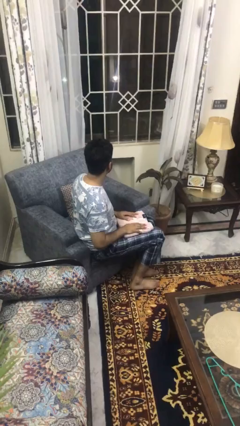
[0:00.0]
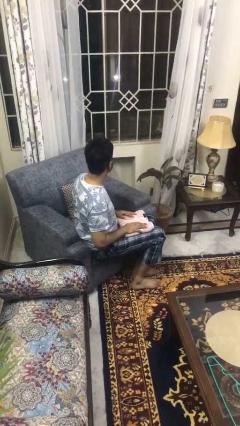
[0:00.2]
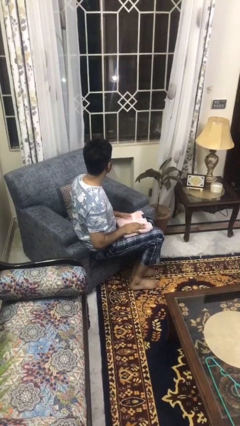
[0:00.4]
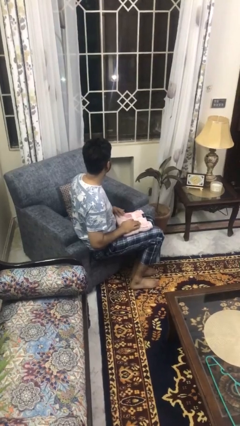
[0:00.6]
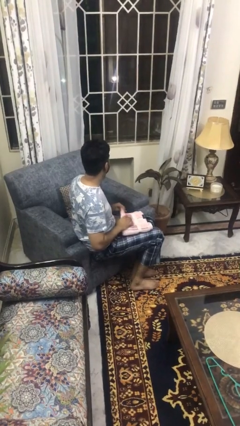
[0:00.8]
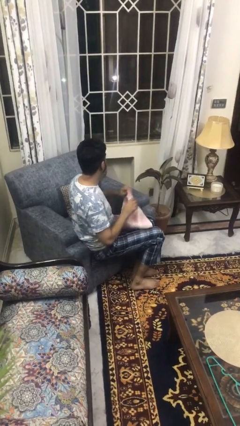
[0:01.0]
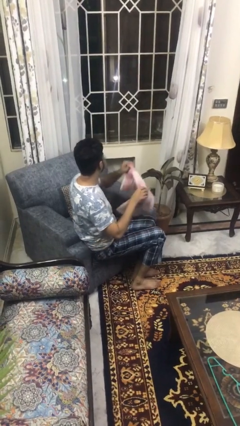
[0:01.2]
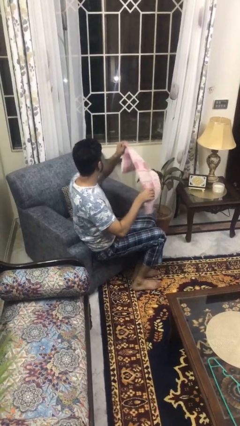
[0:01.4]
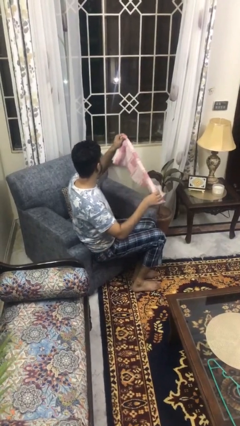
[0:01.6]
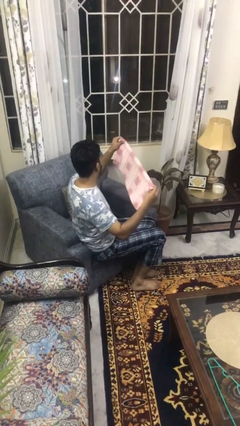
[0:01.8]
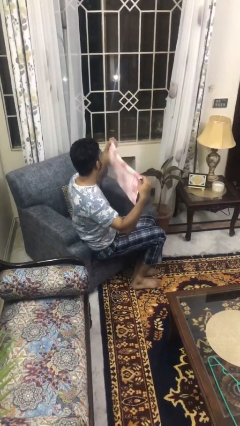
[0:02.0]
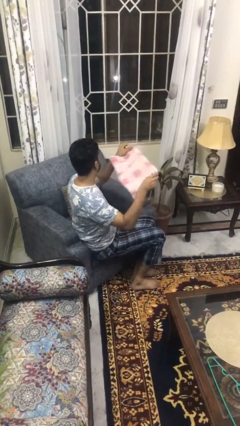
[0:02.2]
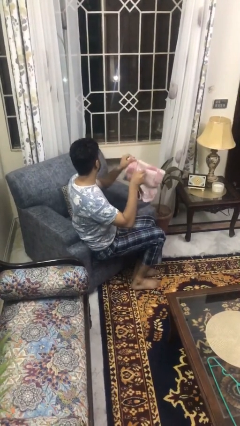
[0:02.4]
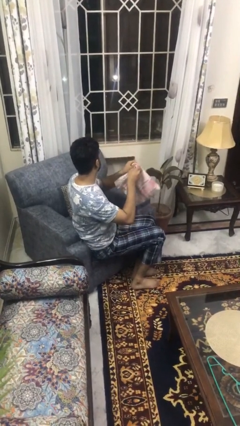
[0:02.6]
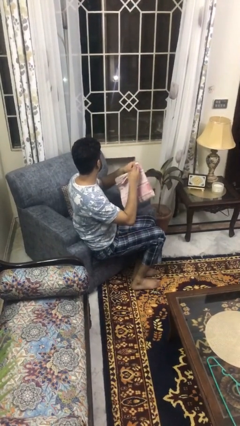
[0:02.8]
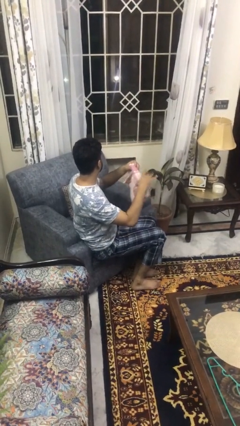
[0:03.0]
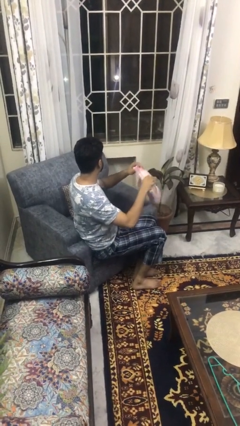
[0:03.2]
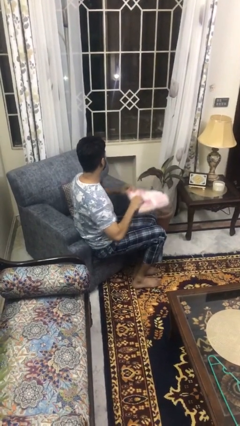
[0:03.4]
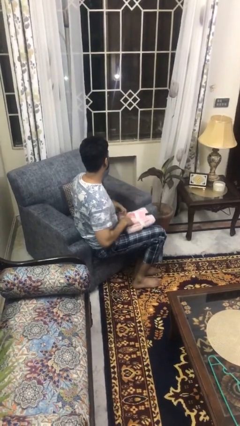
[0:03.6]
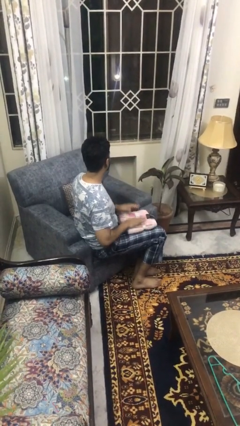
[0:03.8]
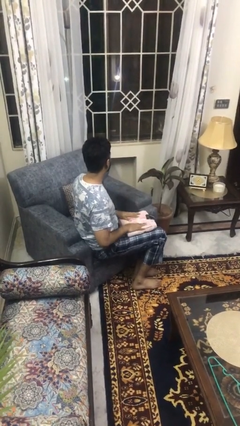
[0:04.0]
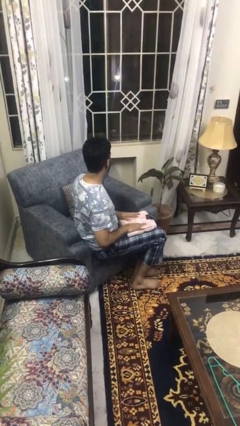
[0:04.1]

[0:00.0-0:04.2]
person folds towel

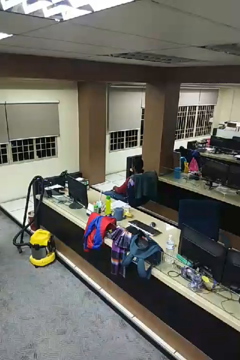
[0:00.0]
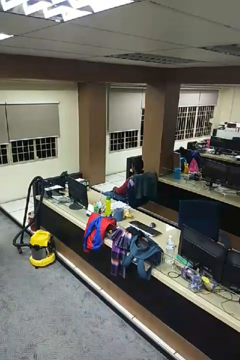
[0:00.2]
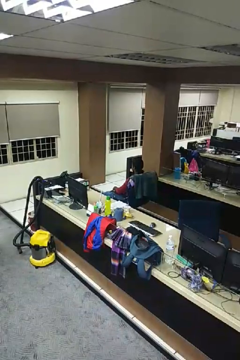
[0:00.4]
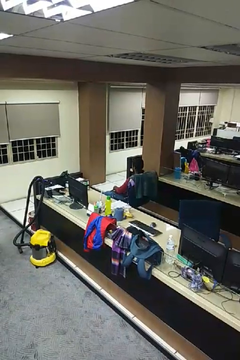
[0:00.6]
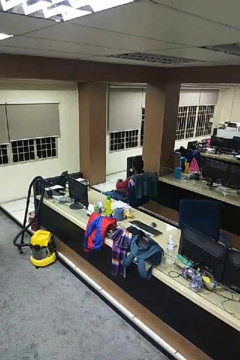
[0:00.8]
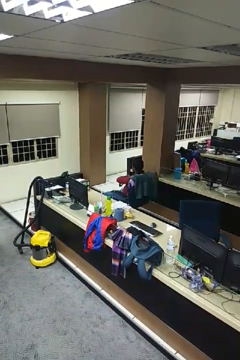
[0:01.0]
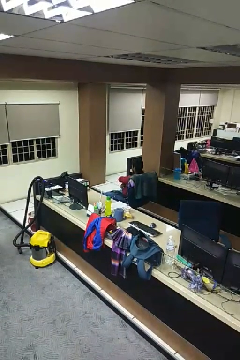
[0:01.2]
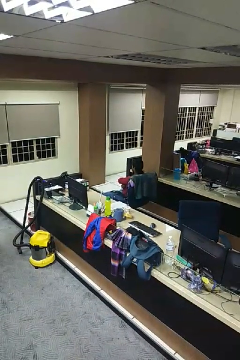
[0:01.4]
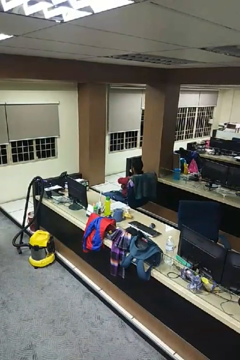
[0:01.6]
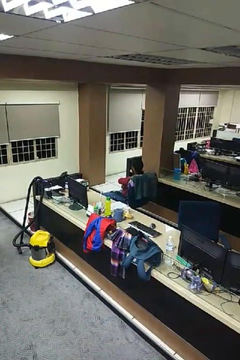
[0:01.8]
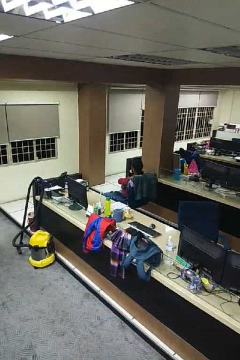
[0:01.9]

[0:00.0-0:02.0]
person crosses arms

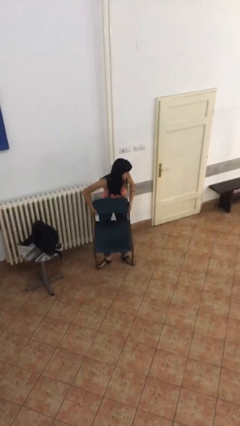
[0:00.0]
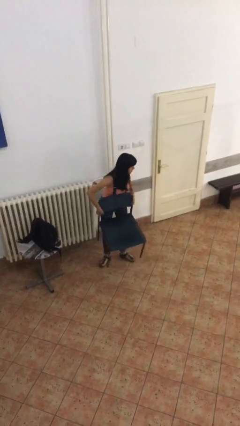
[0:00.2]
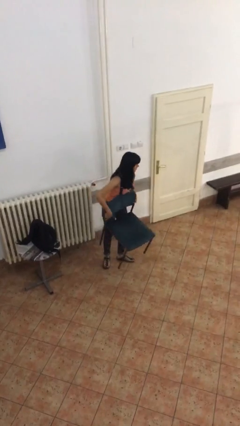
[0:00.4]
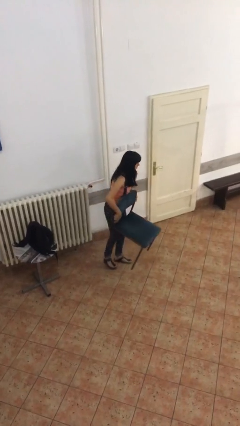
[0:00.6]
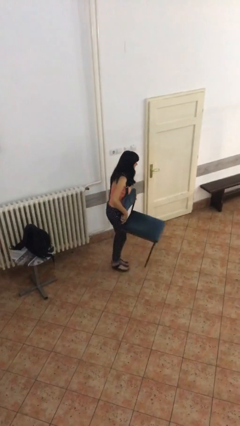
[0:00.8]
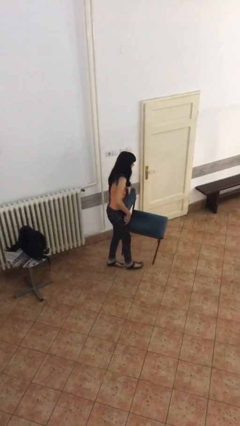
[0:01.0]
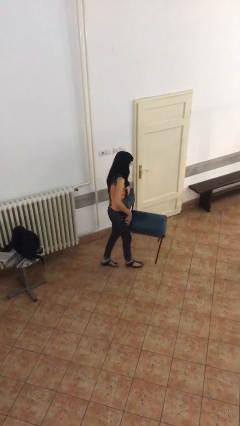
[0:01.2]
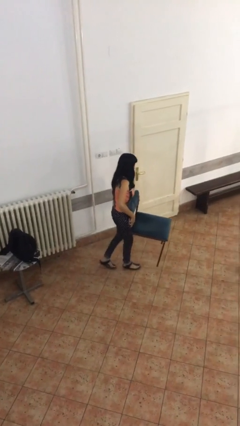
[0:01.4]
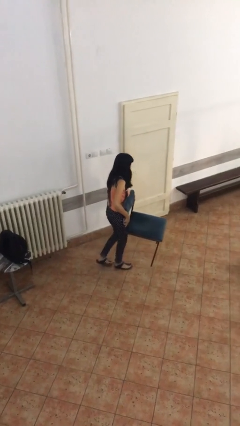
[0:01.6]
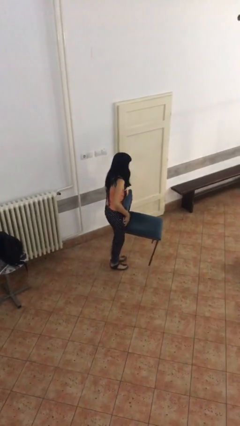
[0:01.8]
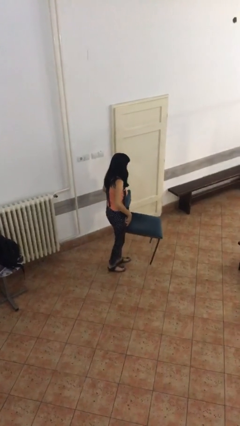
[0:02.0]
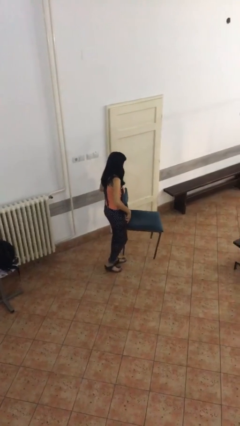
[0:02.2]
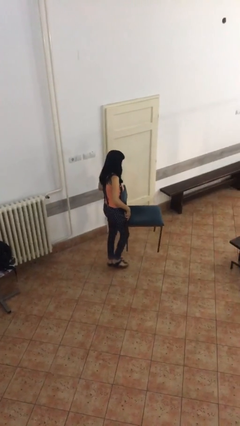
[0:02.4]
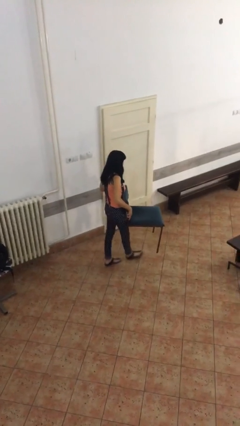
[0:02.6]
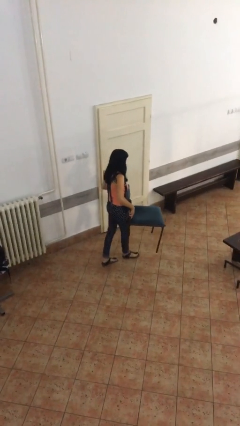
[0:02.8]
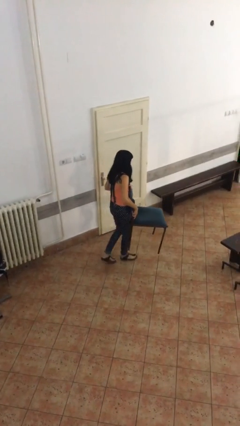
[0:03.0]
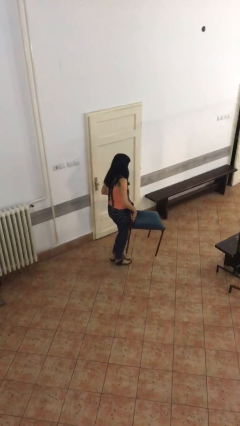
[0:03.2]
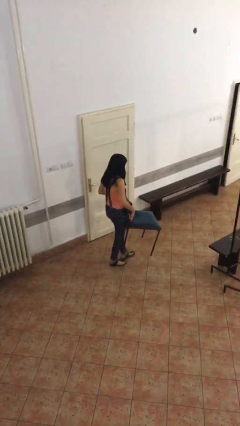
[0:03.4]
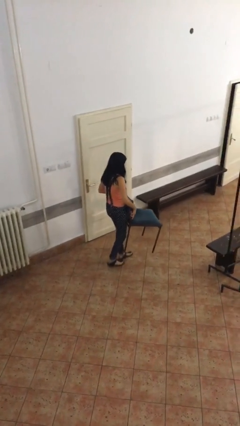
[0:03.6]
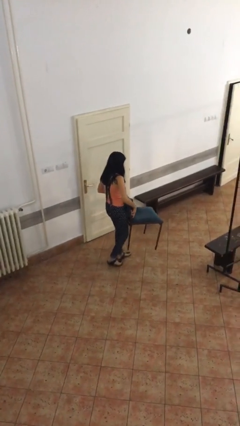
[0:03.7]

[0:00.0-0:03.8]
person carries heavy object

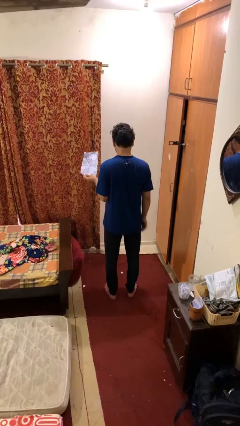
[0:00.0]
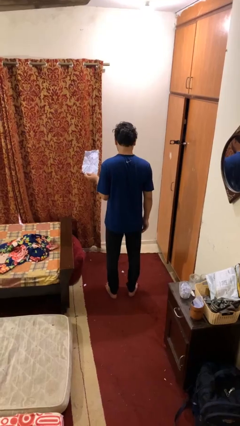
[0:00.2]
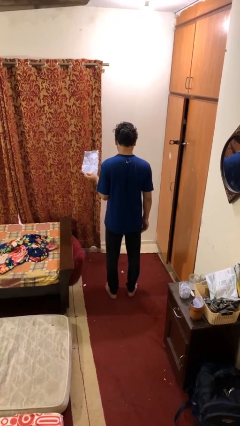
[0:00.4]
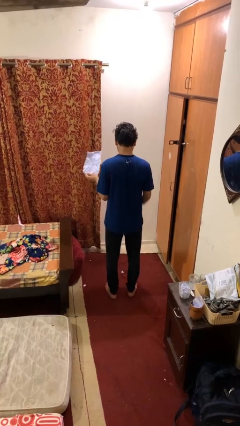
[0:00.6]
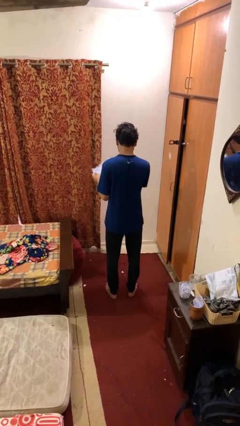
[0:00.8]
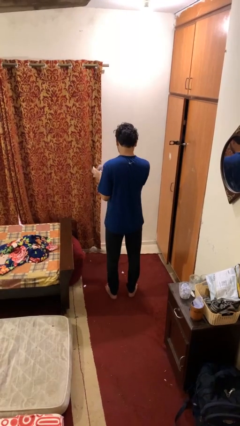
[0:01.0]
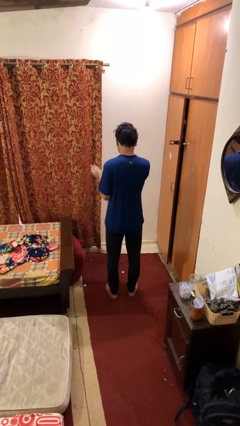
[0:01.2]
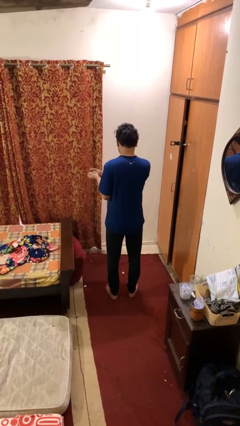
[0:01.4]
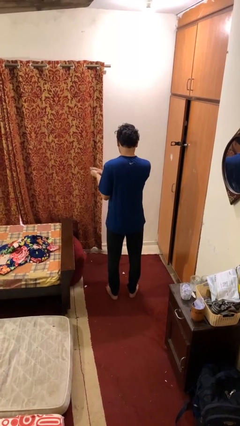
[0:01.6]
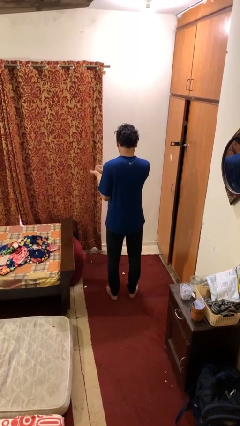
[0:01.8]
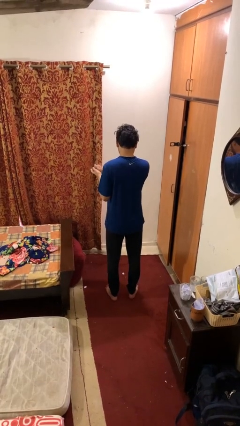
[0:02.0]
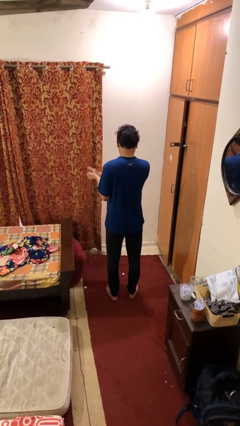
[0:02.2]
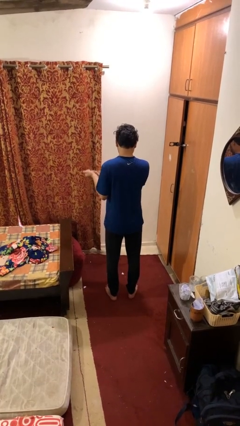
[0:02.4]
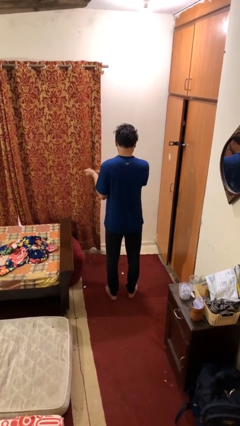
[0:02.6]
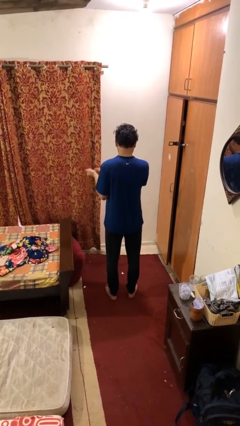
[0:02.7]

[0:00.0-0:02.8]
person crumples paper

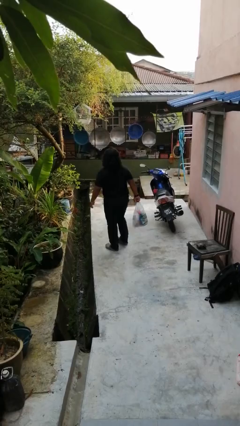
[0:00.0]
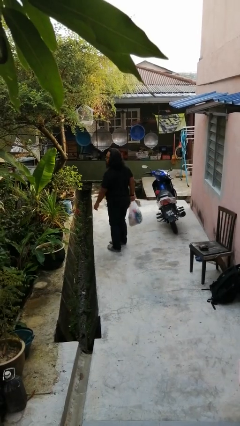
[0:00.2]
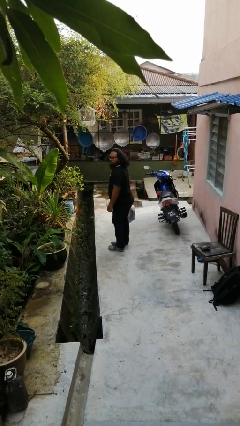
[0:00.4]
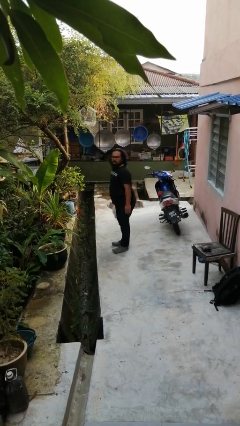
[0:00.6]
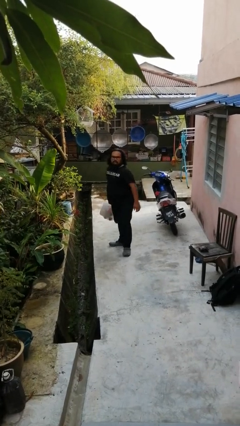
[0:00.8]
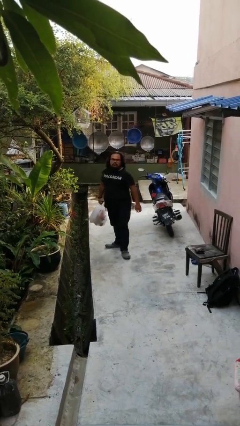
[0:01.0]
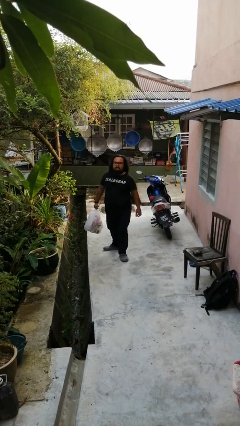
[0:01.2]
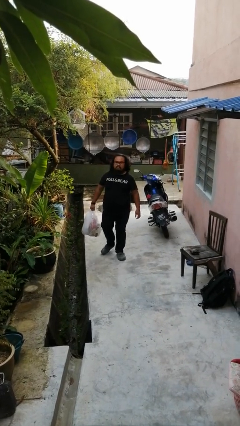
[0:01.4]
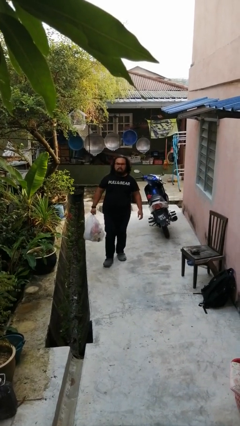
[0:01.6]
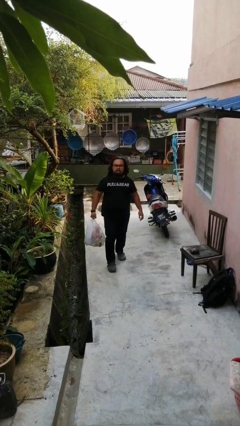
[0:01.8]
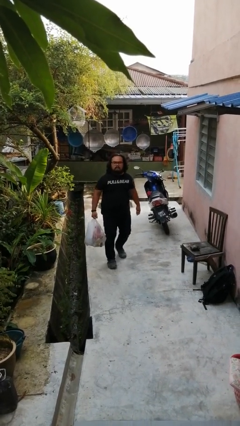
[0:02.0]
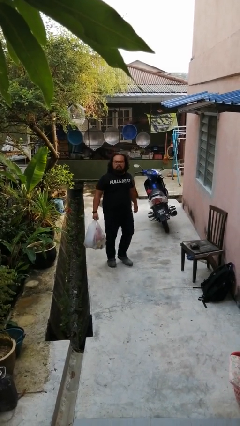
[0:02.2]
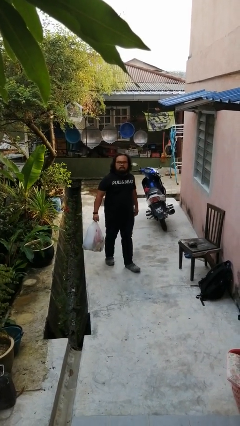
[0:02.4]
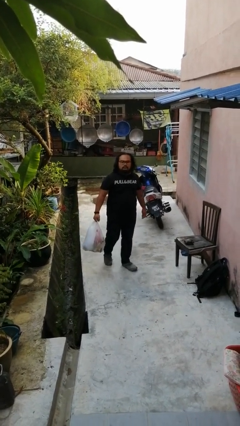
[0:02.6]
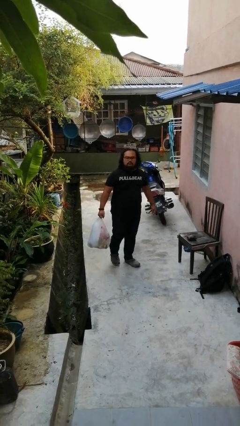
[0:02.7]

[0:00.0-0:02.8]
person carries groceries

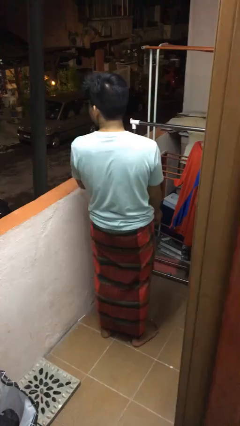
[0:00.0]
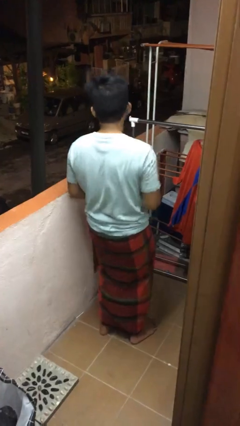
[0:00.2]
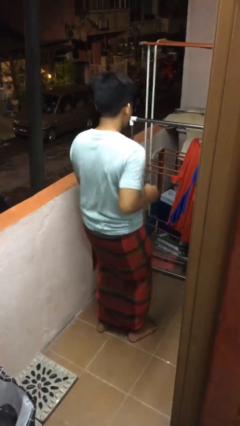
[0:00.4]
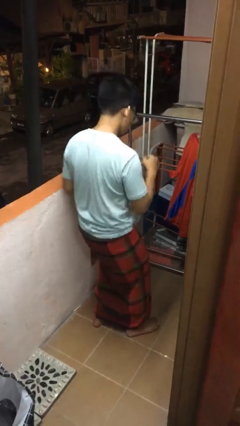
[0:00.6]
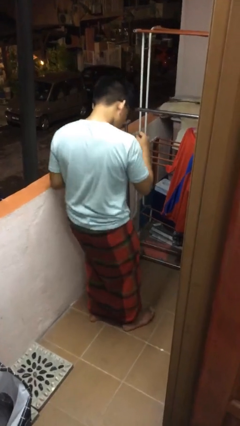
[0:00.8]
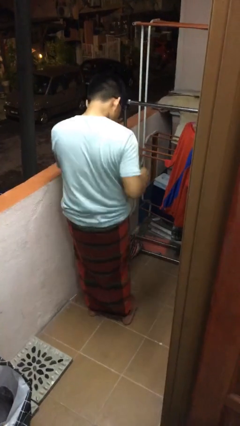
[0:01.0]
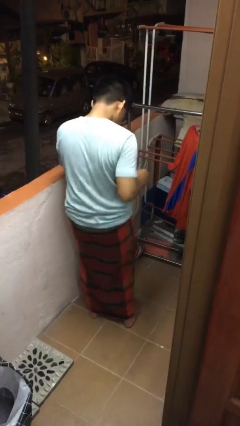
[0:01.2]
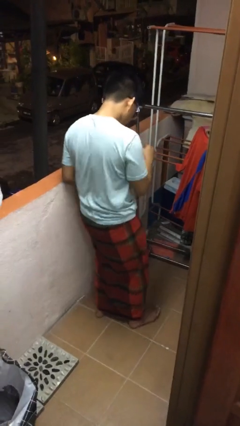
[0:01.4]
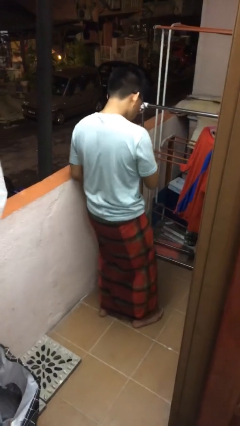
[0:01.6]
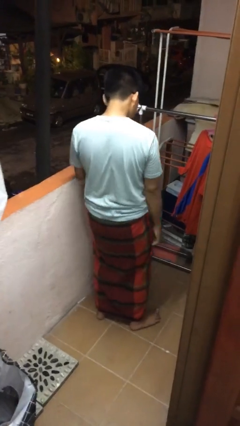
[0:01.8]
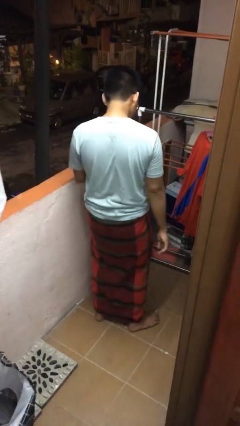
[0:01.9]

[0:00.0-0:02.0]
person dances in place
